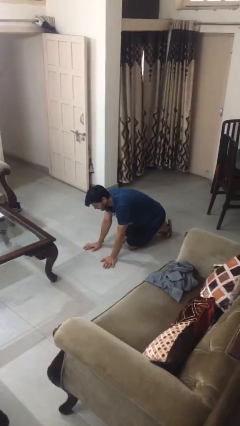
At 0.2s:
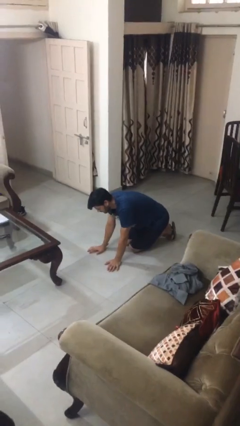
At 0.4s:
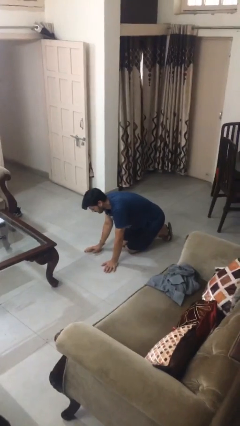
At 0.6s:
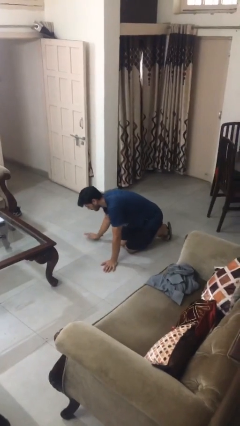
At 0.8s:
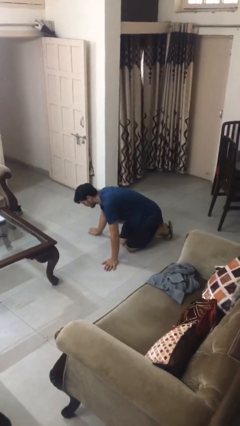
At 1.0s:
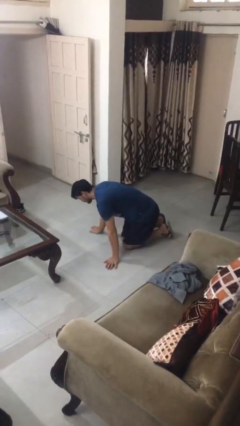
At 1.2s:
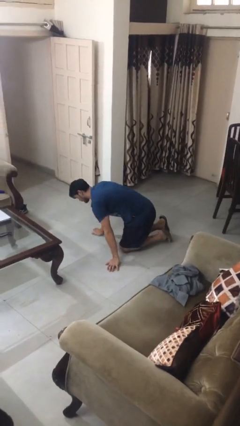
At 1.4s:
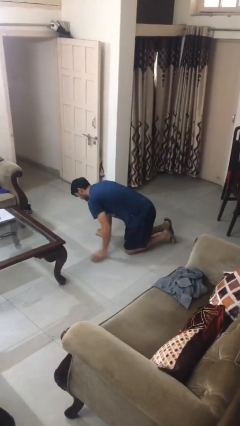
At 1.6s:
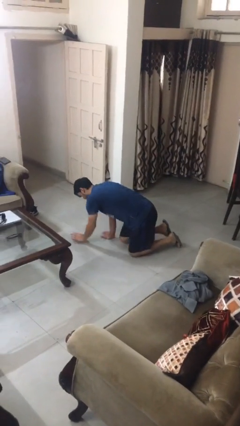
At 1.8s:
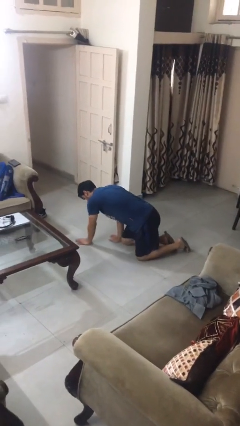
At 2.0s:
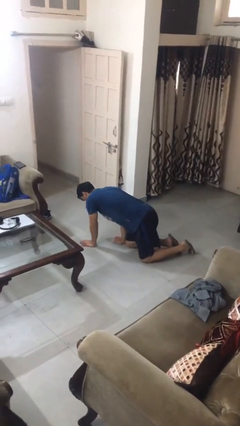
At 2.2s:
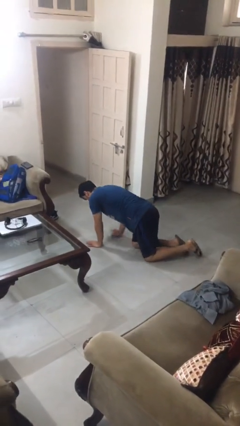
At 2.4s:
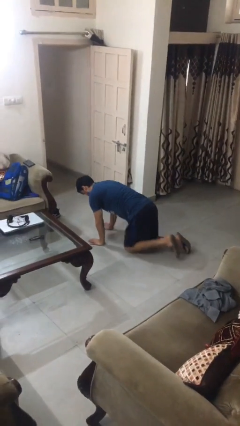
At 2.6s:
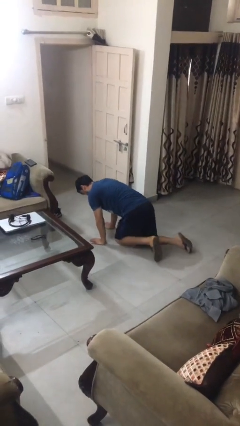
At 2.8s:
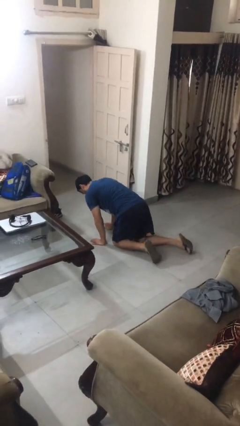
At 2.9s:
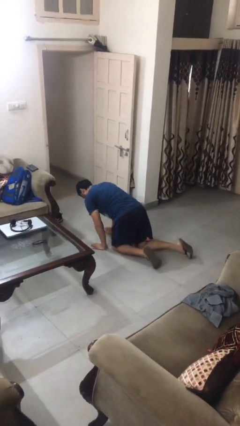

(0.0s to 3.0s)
person crawls

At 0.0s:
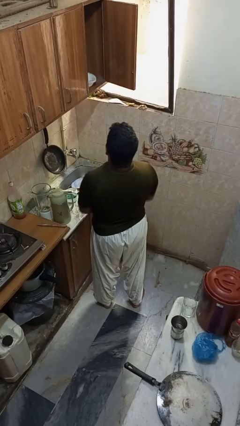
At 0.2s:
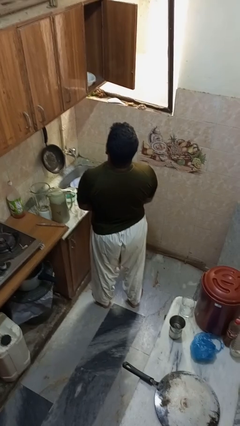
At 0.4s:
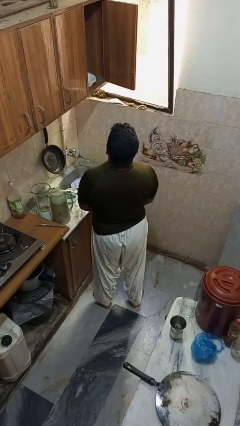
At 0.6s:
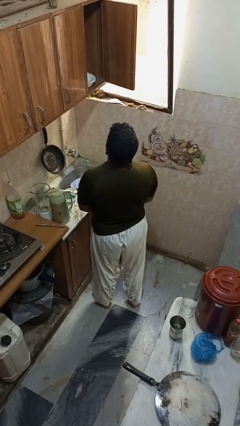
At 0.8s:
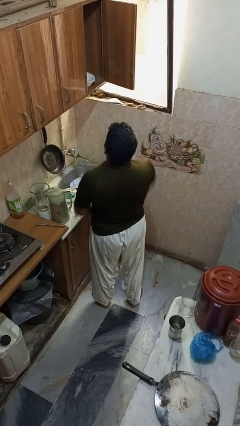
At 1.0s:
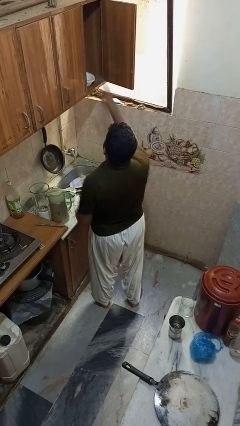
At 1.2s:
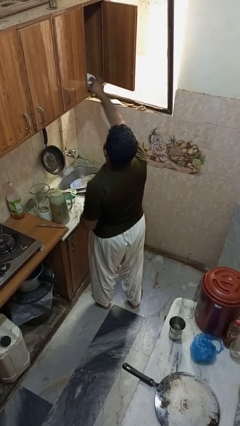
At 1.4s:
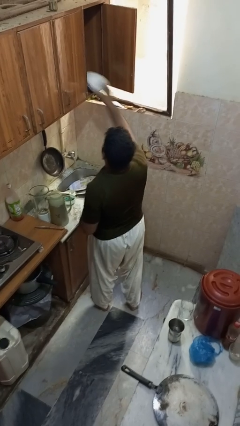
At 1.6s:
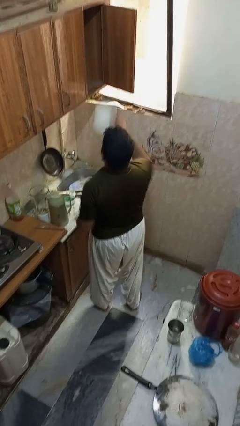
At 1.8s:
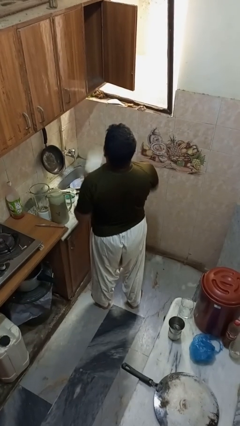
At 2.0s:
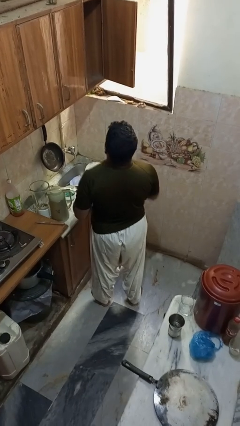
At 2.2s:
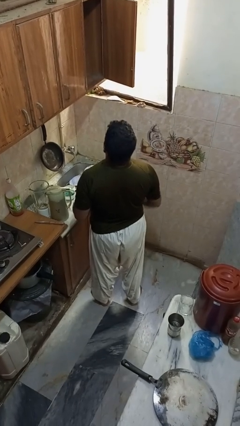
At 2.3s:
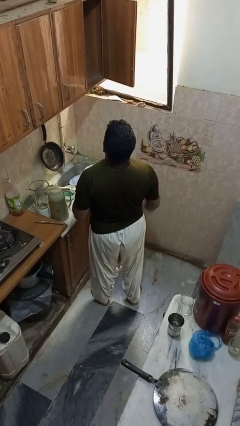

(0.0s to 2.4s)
person takes object from cabinet

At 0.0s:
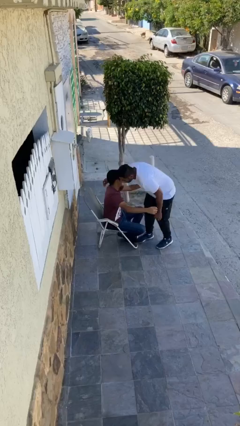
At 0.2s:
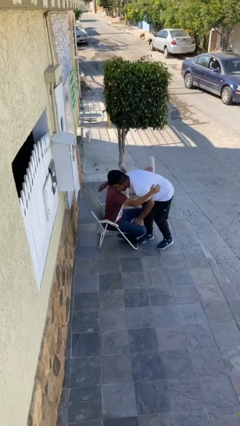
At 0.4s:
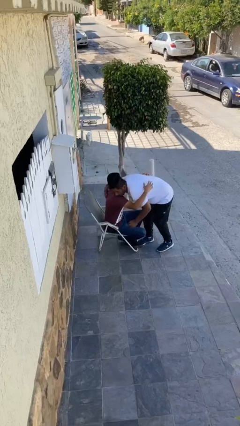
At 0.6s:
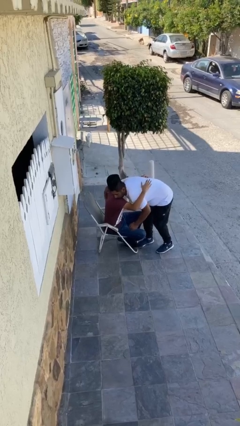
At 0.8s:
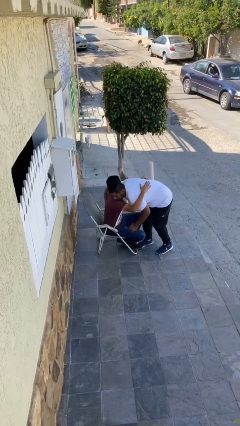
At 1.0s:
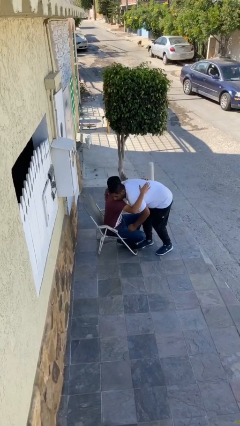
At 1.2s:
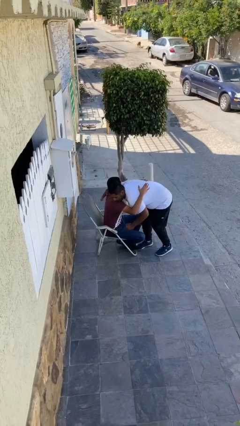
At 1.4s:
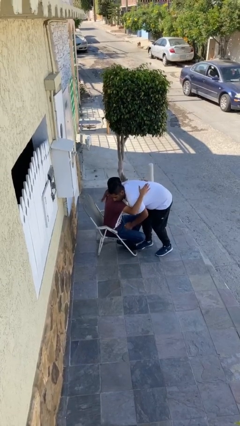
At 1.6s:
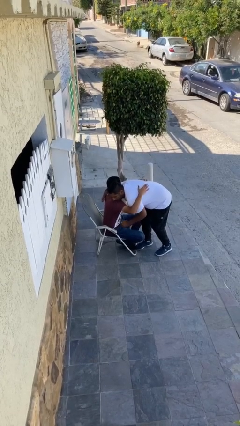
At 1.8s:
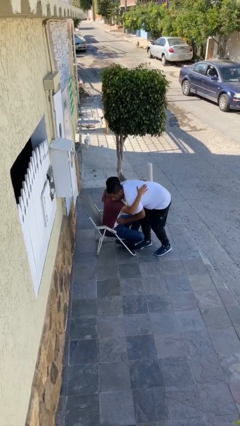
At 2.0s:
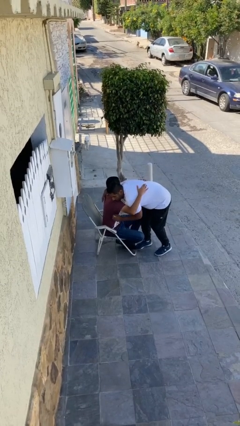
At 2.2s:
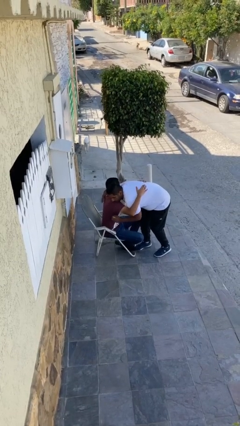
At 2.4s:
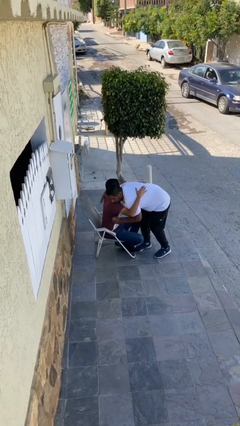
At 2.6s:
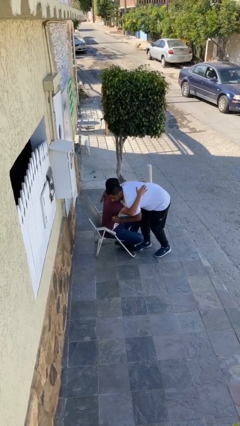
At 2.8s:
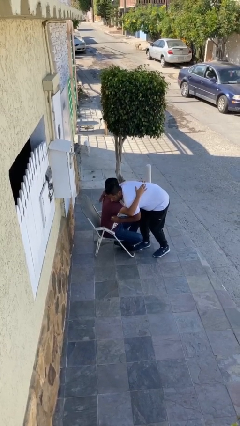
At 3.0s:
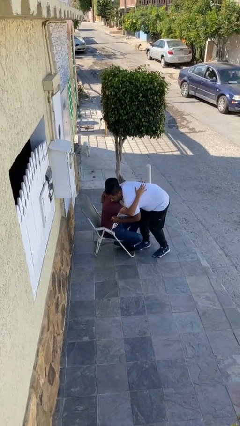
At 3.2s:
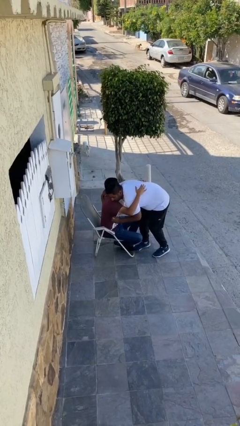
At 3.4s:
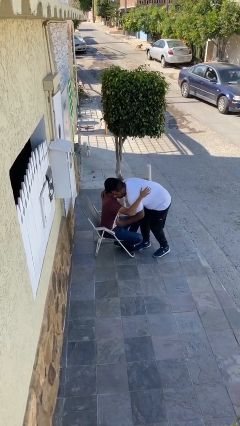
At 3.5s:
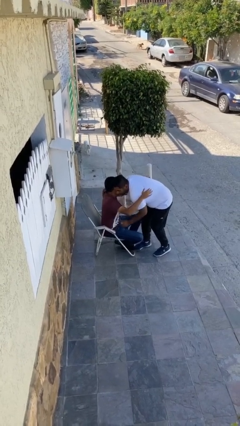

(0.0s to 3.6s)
person embraces person

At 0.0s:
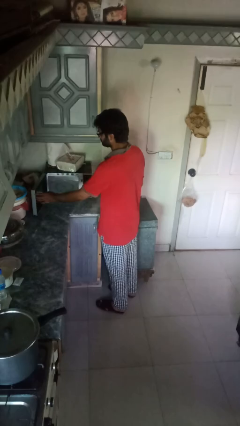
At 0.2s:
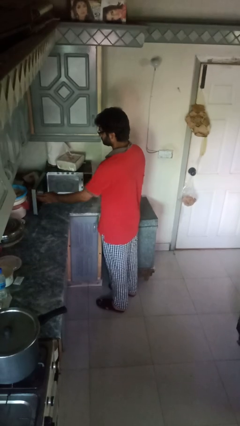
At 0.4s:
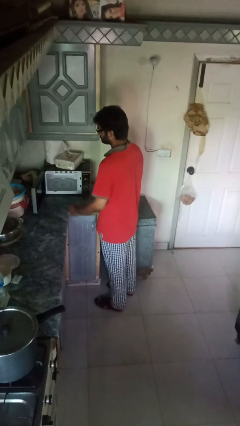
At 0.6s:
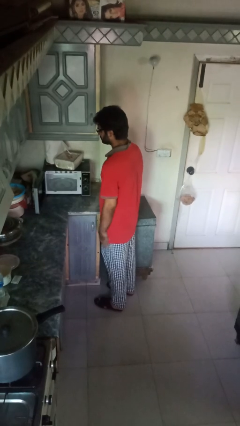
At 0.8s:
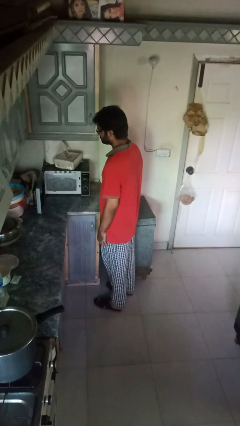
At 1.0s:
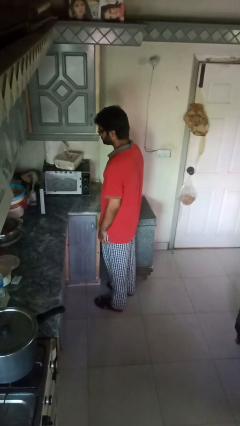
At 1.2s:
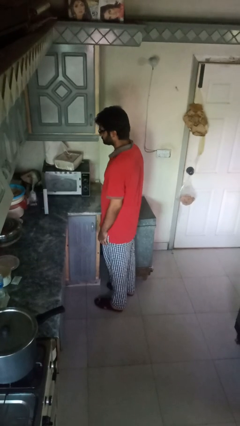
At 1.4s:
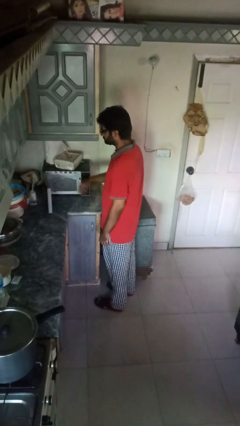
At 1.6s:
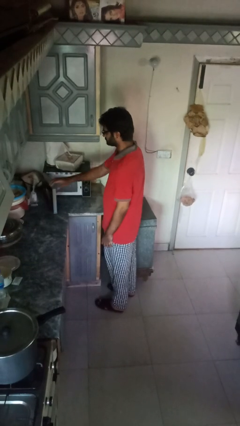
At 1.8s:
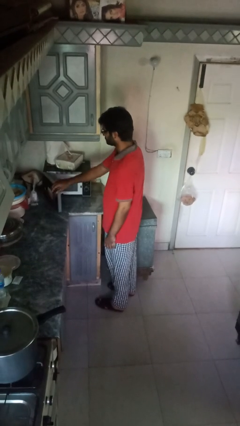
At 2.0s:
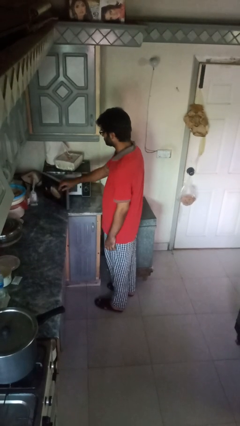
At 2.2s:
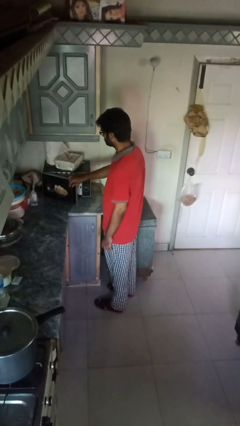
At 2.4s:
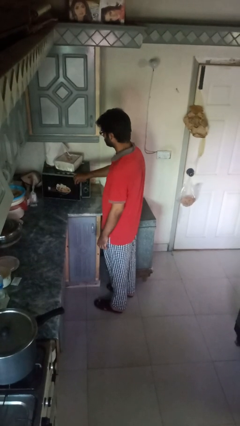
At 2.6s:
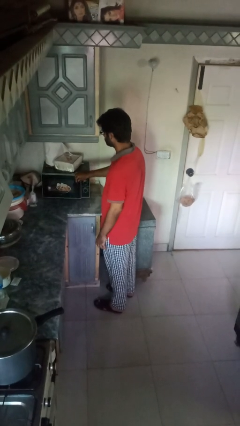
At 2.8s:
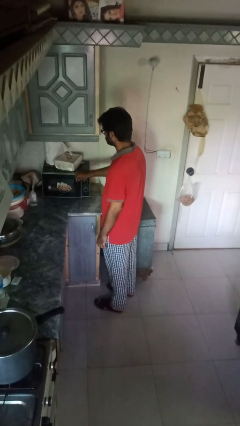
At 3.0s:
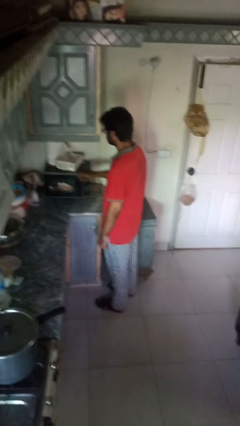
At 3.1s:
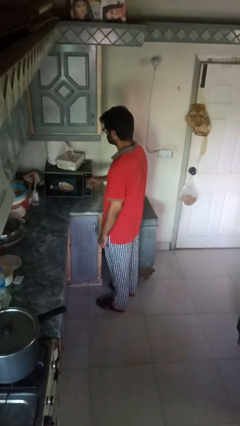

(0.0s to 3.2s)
person closes oven door

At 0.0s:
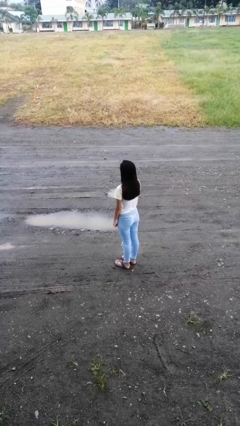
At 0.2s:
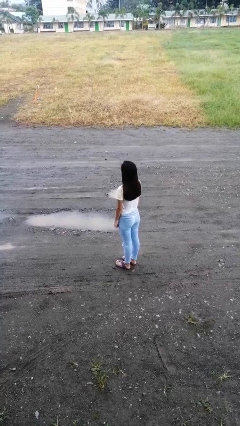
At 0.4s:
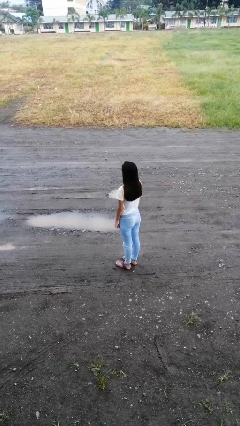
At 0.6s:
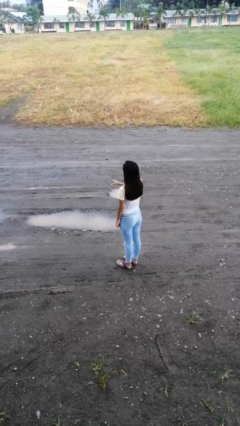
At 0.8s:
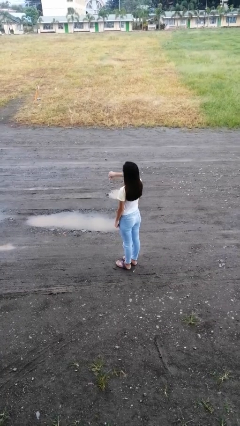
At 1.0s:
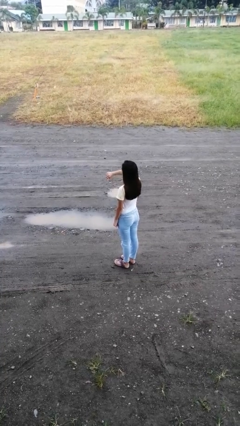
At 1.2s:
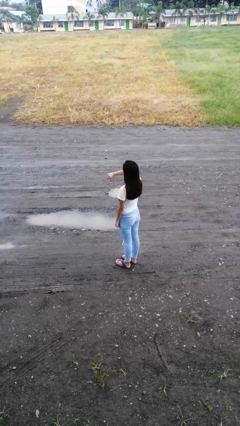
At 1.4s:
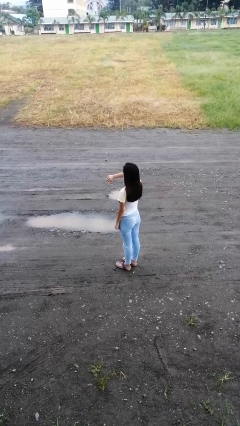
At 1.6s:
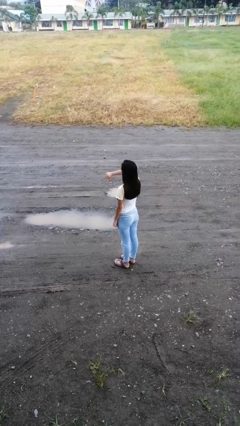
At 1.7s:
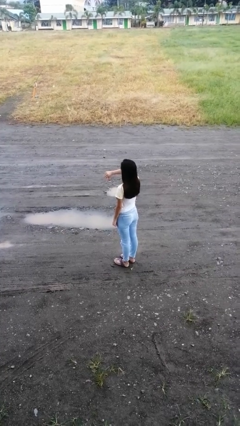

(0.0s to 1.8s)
person gestures thumbs down

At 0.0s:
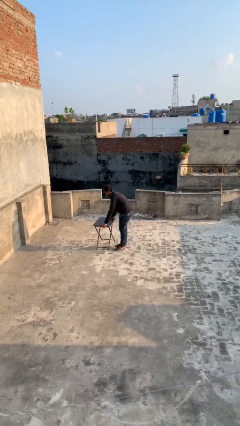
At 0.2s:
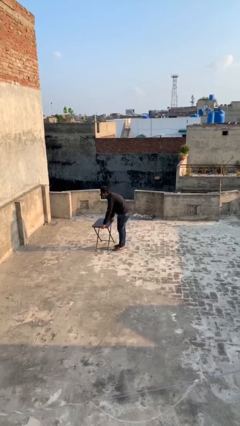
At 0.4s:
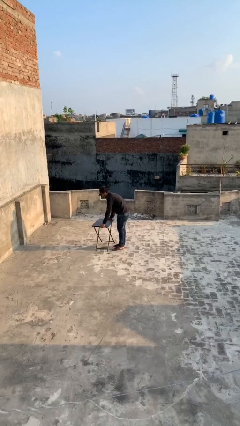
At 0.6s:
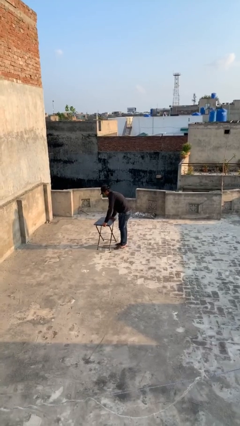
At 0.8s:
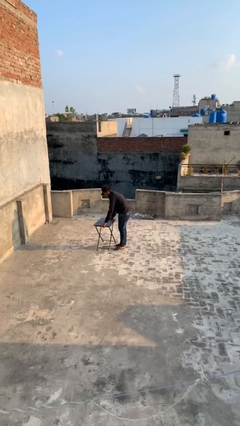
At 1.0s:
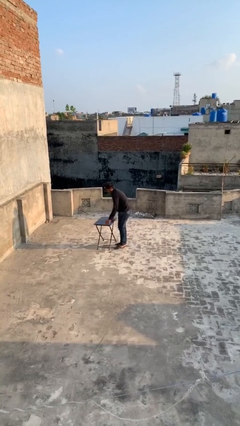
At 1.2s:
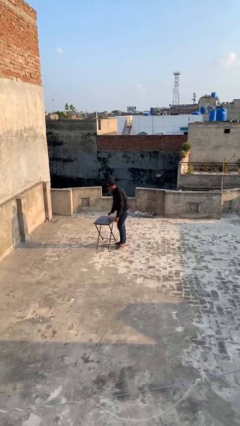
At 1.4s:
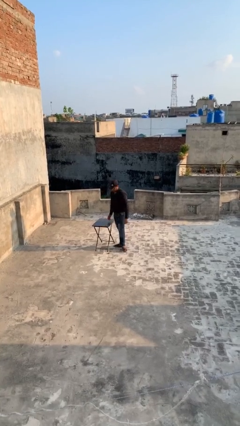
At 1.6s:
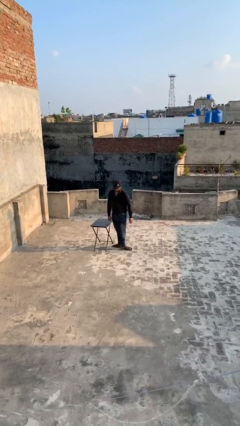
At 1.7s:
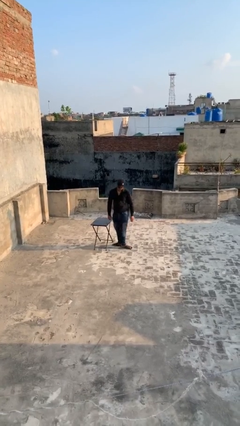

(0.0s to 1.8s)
person puts down object on floor

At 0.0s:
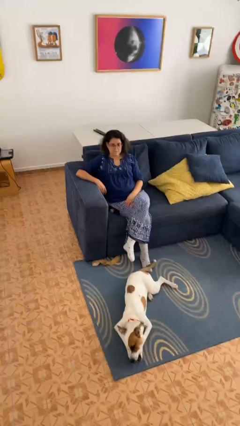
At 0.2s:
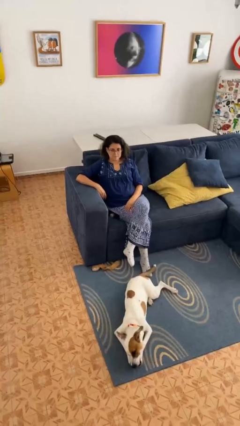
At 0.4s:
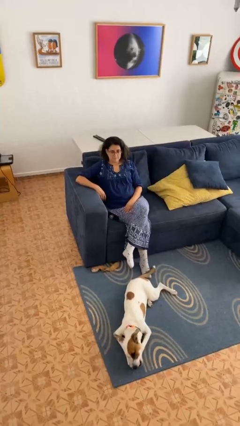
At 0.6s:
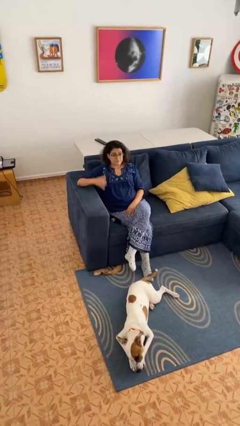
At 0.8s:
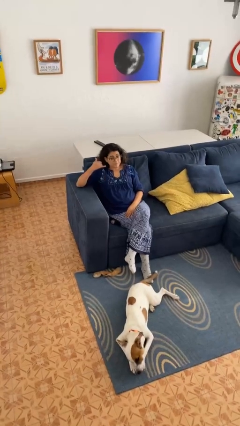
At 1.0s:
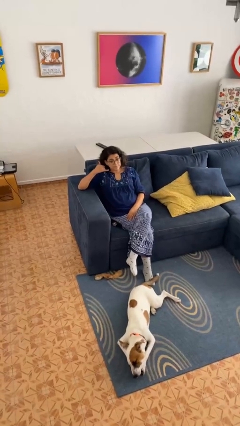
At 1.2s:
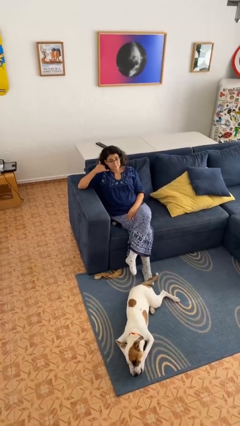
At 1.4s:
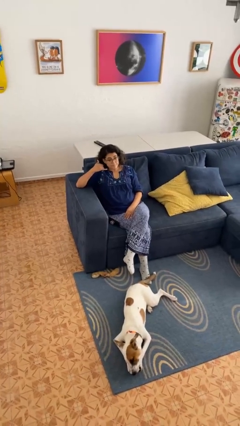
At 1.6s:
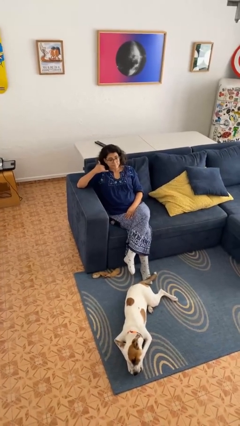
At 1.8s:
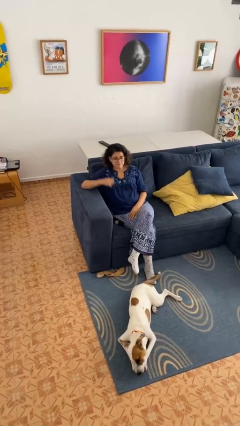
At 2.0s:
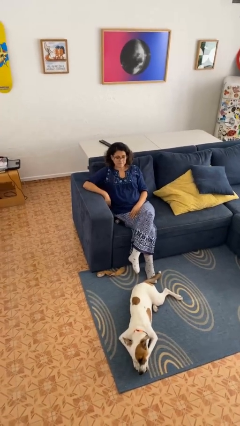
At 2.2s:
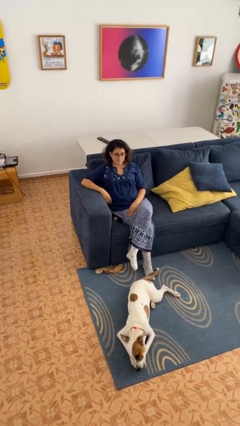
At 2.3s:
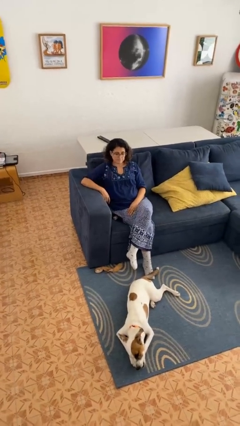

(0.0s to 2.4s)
person gestures call me
